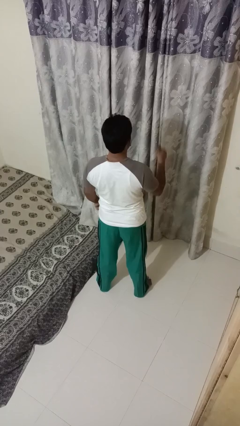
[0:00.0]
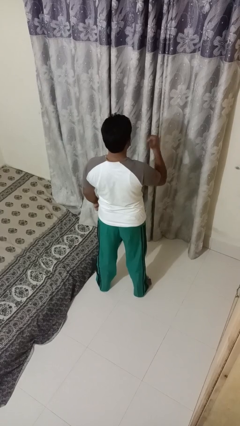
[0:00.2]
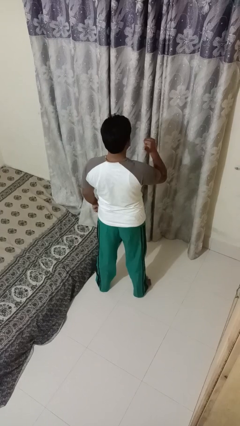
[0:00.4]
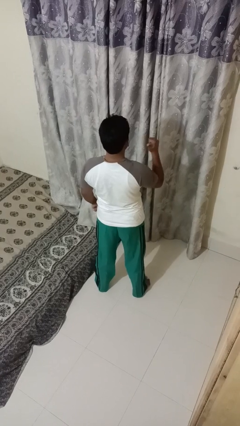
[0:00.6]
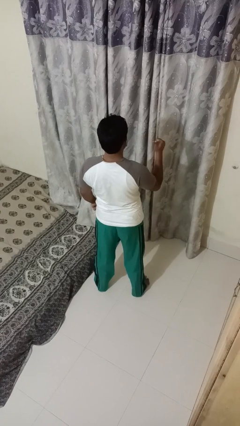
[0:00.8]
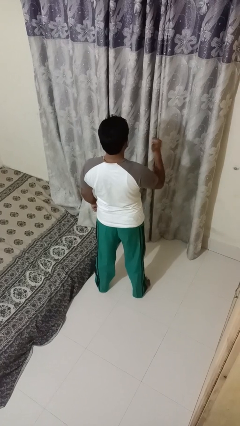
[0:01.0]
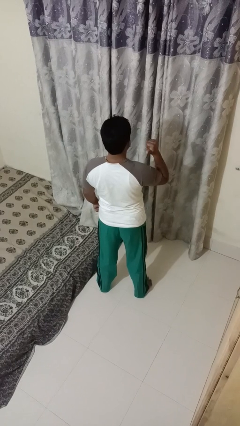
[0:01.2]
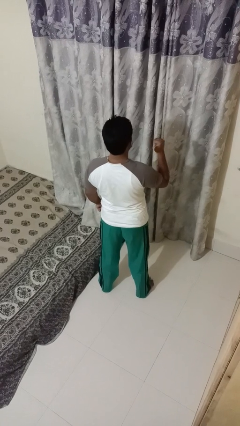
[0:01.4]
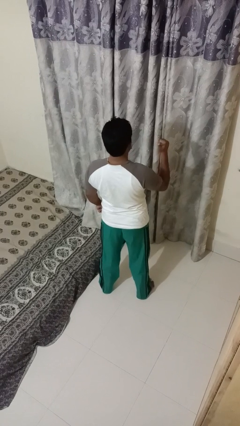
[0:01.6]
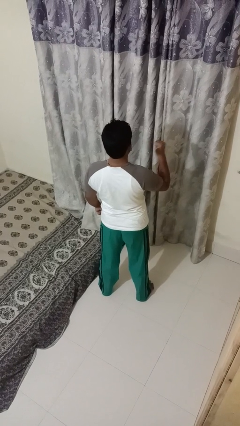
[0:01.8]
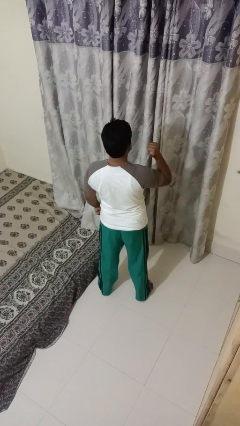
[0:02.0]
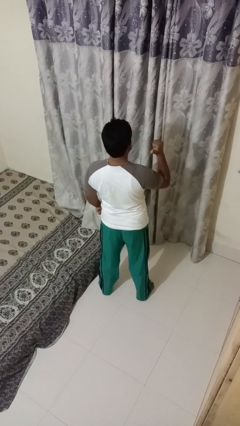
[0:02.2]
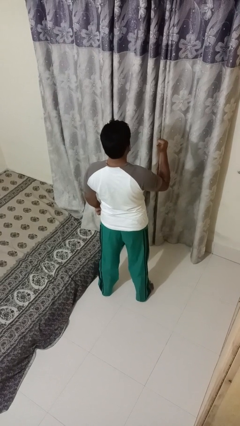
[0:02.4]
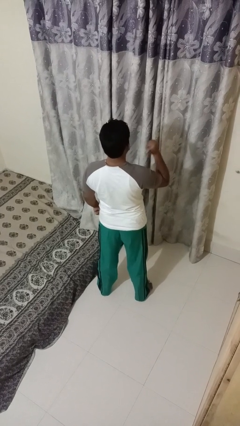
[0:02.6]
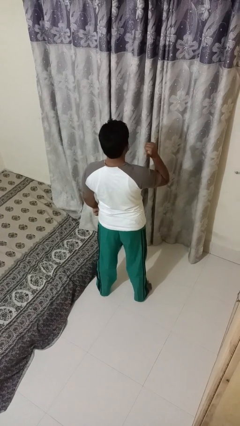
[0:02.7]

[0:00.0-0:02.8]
person gestures behind me

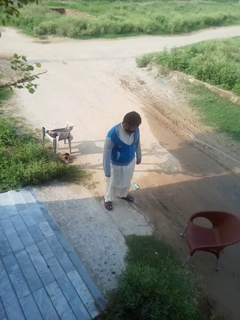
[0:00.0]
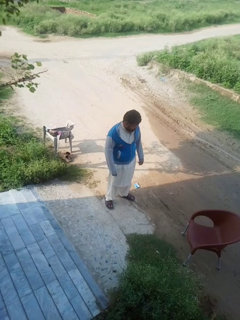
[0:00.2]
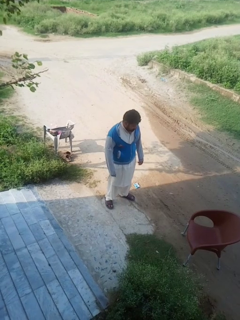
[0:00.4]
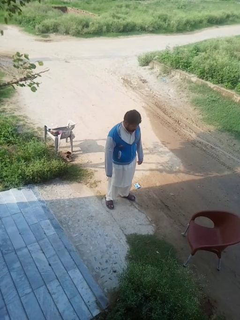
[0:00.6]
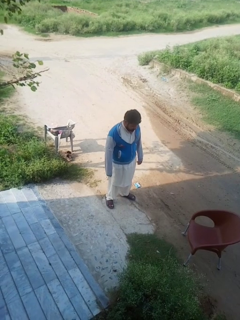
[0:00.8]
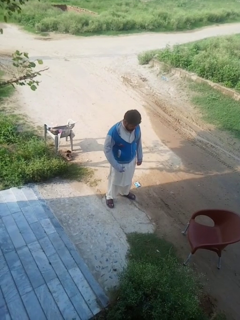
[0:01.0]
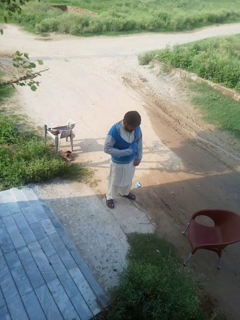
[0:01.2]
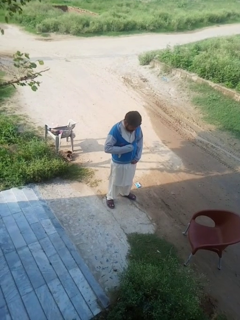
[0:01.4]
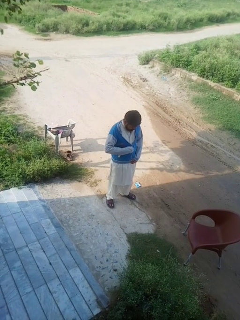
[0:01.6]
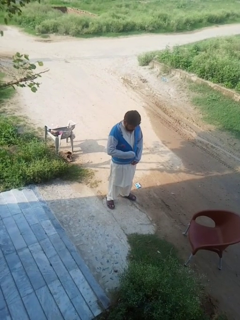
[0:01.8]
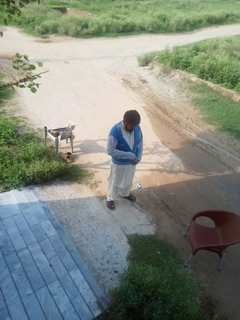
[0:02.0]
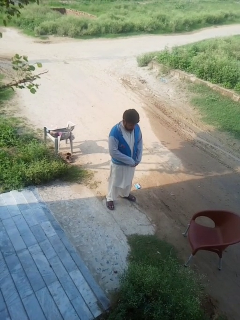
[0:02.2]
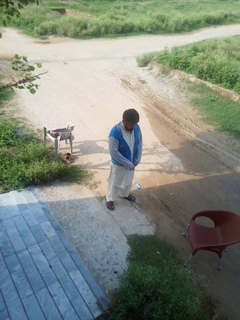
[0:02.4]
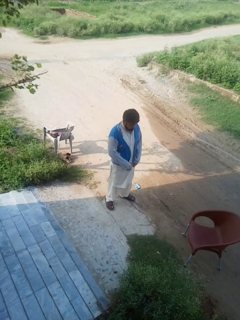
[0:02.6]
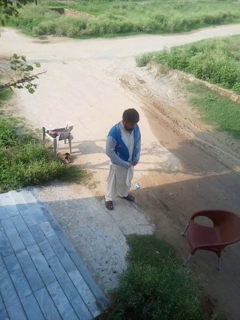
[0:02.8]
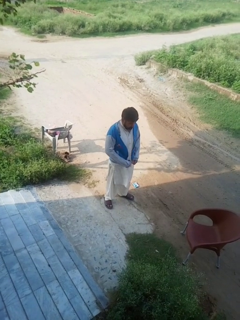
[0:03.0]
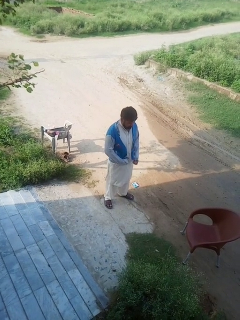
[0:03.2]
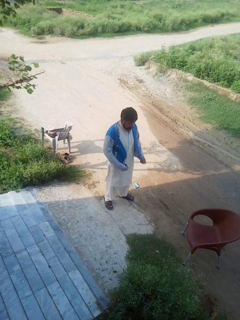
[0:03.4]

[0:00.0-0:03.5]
person unzips jacket

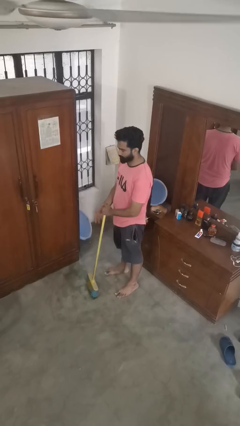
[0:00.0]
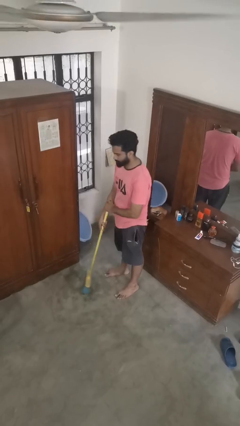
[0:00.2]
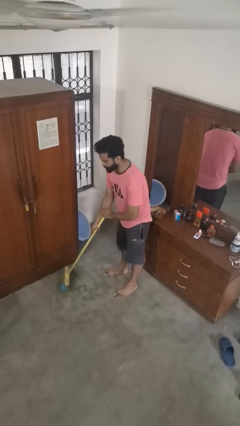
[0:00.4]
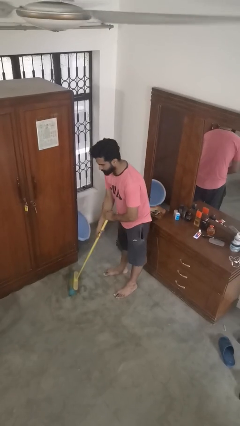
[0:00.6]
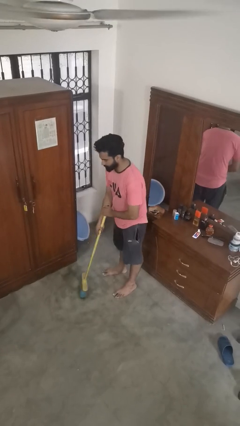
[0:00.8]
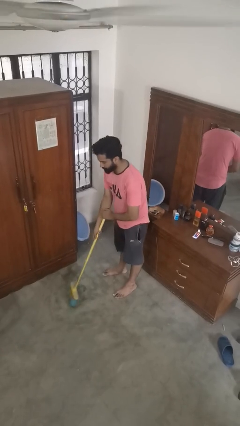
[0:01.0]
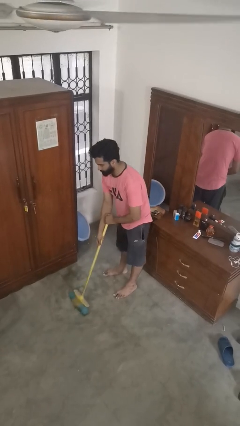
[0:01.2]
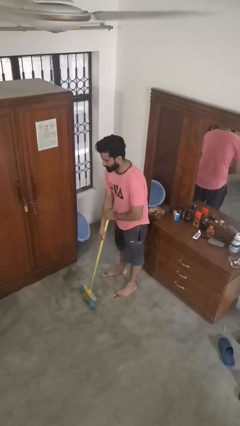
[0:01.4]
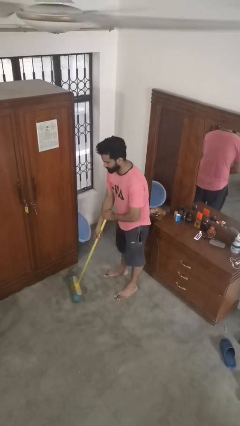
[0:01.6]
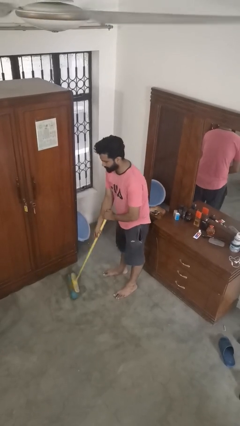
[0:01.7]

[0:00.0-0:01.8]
person sweeps floor

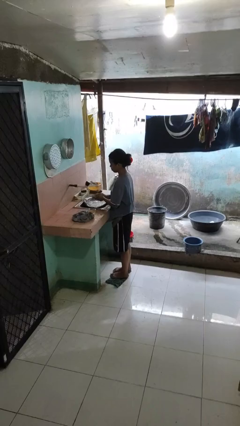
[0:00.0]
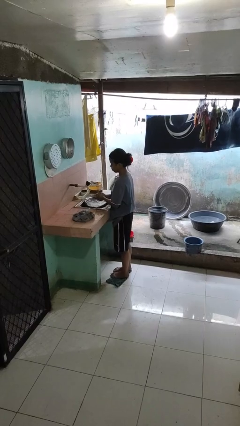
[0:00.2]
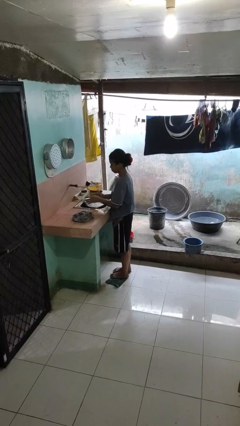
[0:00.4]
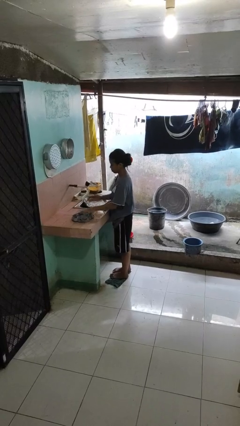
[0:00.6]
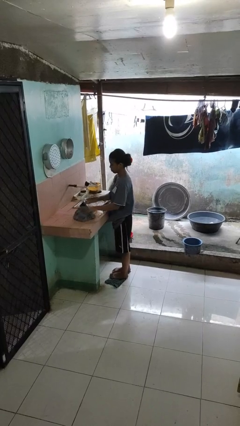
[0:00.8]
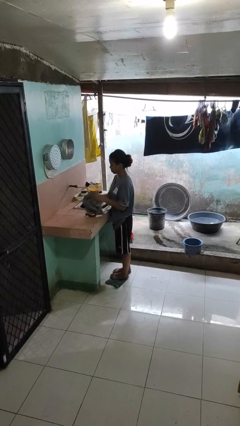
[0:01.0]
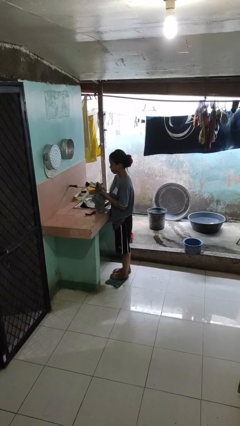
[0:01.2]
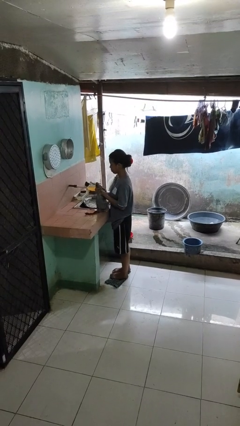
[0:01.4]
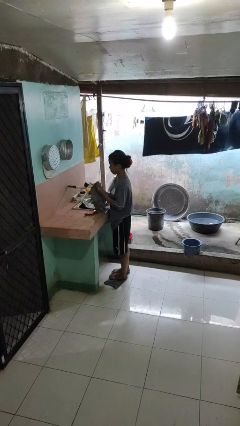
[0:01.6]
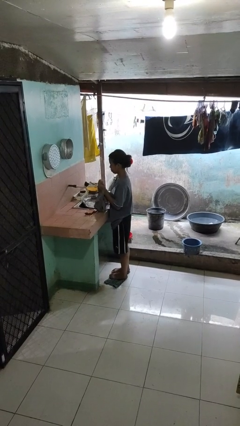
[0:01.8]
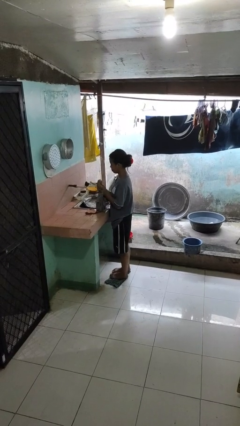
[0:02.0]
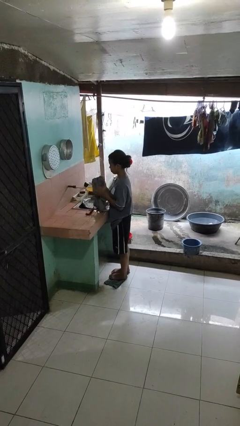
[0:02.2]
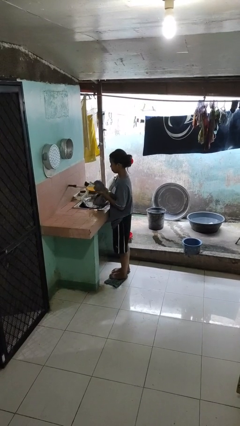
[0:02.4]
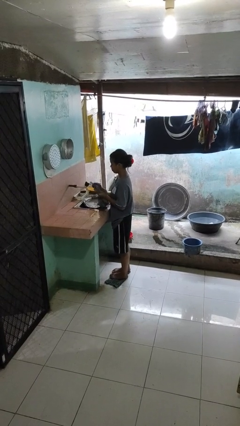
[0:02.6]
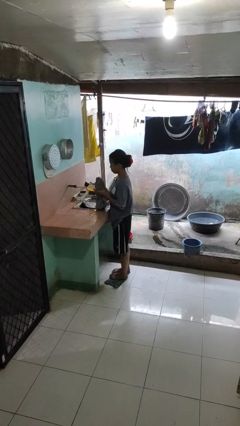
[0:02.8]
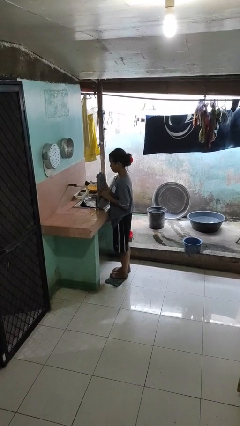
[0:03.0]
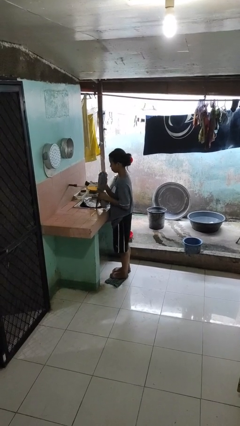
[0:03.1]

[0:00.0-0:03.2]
person dries hands with towel

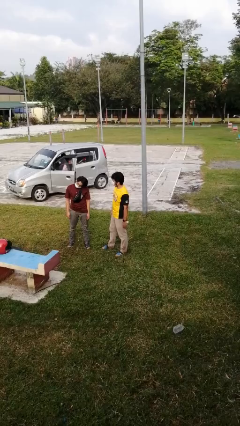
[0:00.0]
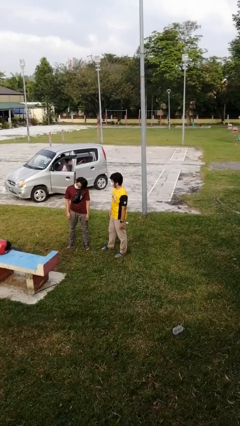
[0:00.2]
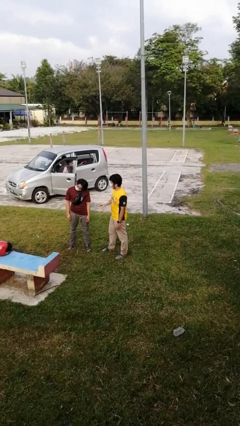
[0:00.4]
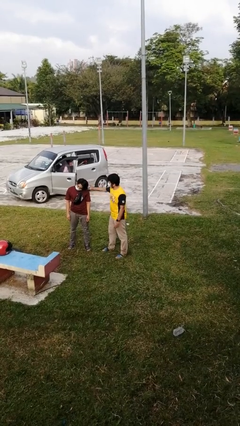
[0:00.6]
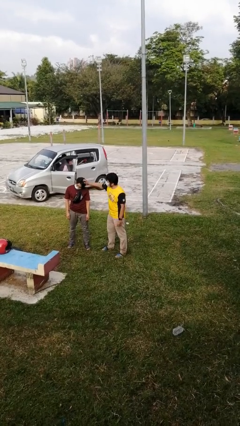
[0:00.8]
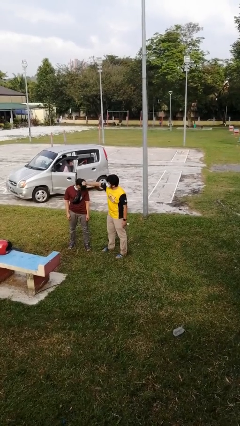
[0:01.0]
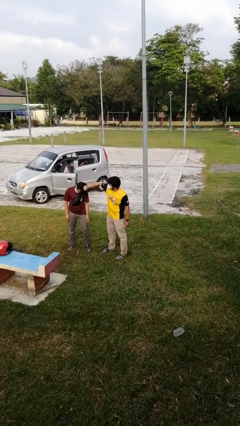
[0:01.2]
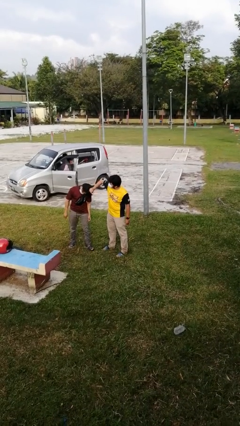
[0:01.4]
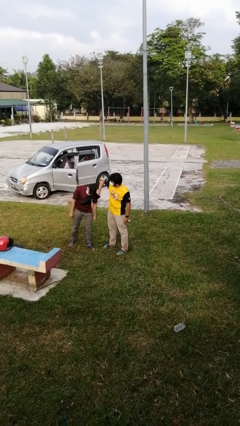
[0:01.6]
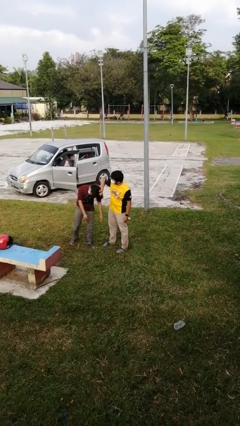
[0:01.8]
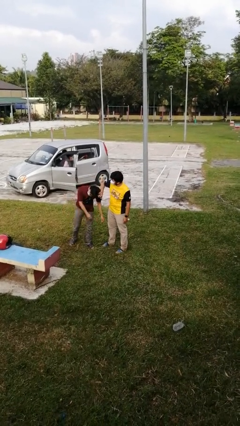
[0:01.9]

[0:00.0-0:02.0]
person grabs person by hair

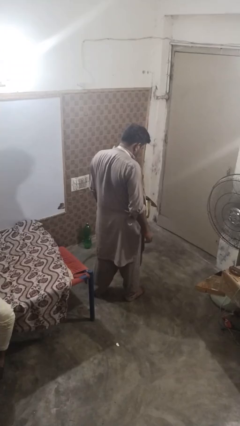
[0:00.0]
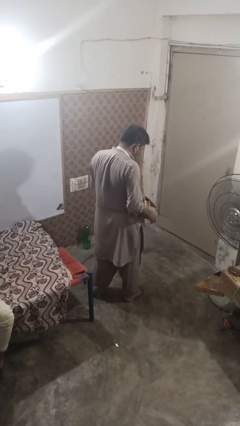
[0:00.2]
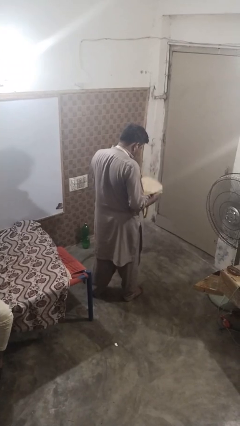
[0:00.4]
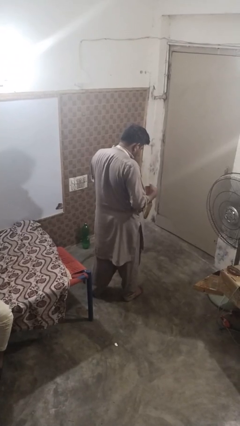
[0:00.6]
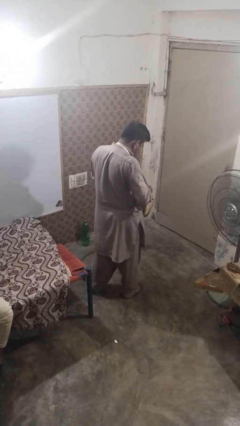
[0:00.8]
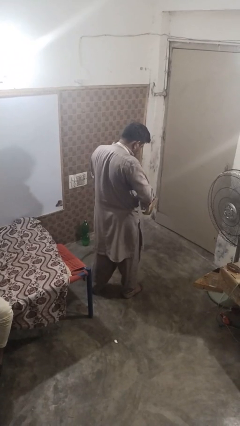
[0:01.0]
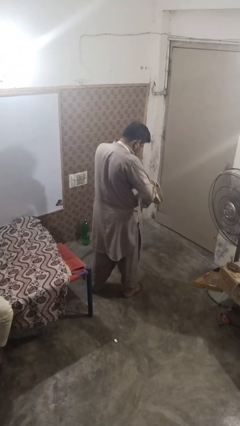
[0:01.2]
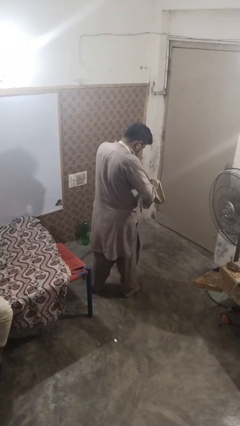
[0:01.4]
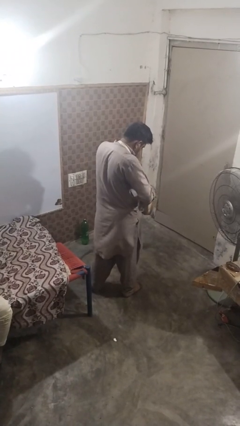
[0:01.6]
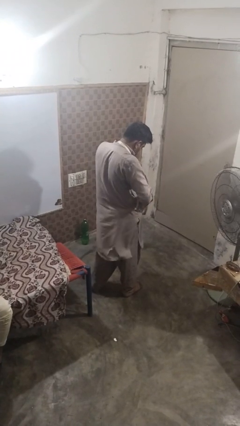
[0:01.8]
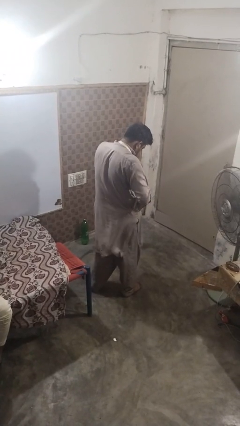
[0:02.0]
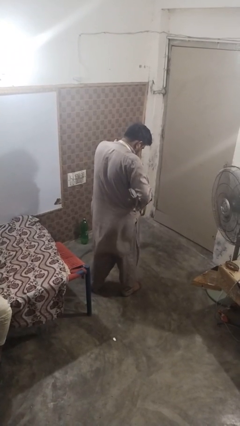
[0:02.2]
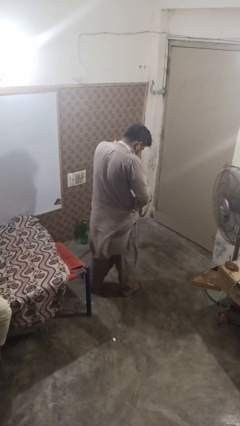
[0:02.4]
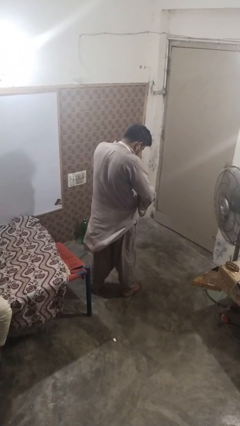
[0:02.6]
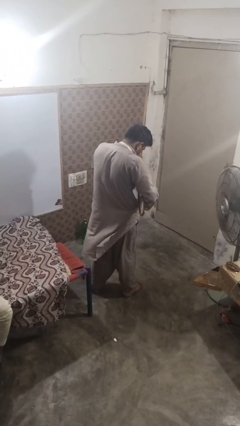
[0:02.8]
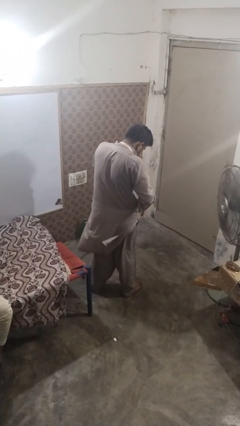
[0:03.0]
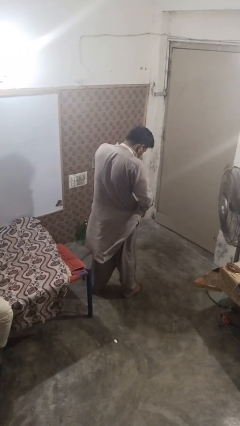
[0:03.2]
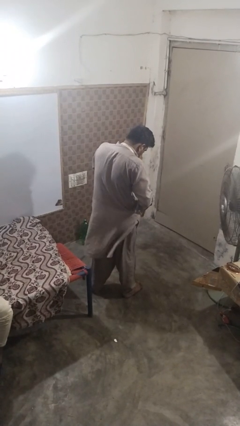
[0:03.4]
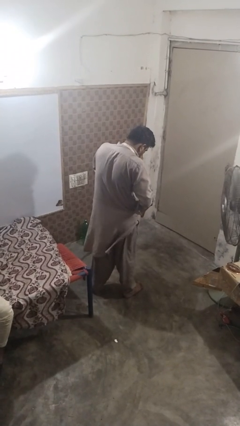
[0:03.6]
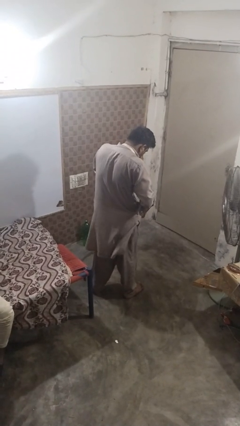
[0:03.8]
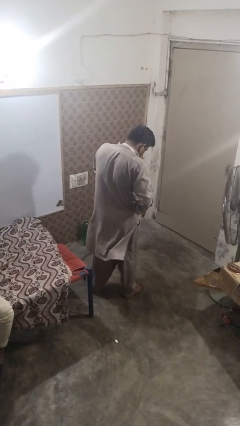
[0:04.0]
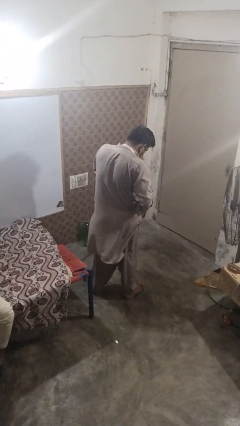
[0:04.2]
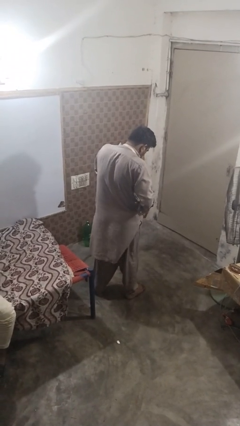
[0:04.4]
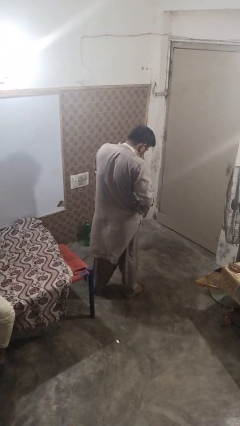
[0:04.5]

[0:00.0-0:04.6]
person searches in purse

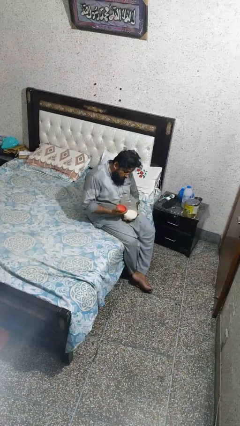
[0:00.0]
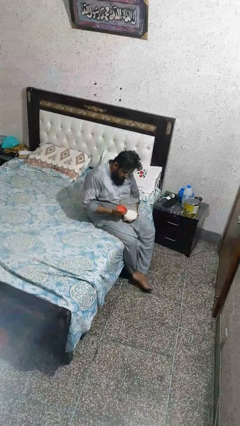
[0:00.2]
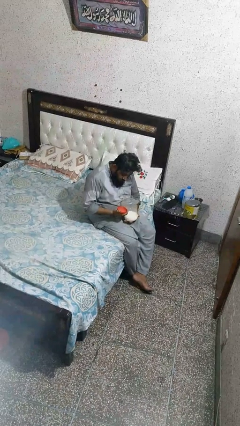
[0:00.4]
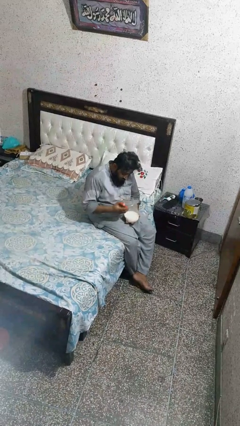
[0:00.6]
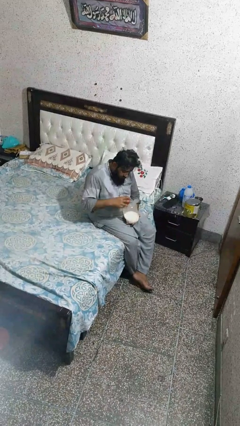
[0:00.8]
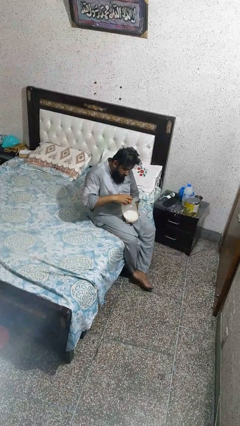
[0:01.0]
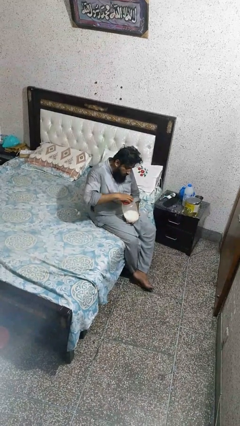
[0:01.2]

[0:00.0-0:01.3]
person closes jar
